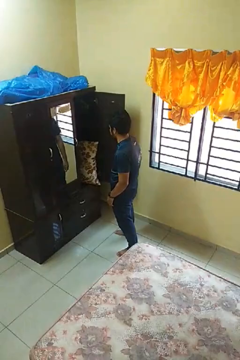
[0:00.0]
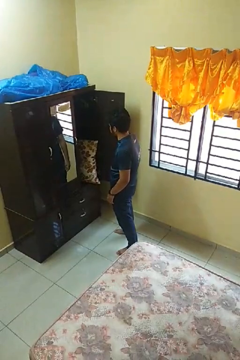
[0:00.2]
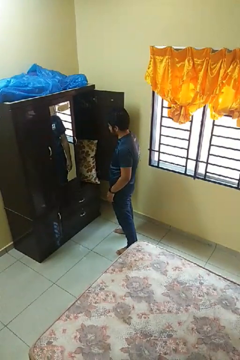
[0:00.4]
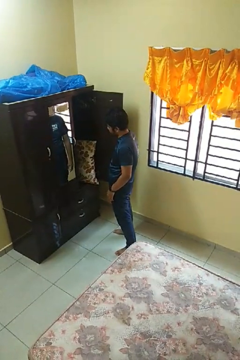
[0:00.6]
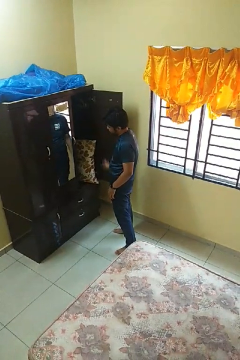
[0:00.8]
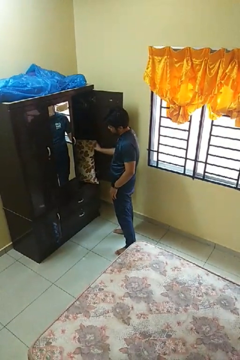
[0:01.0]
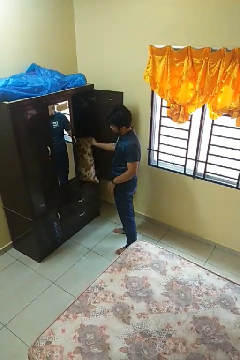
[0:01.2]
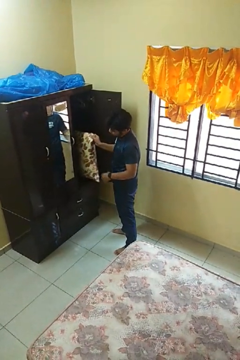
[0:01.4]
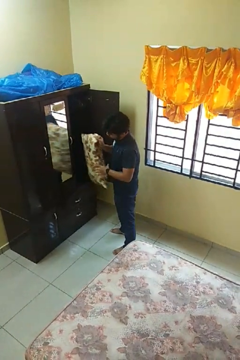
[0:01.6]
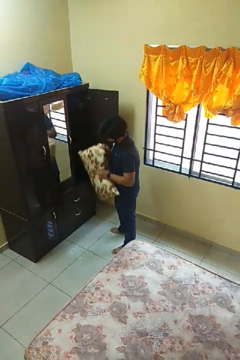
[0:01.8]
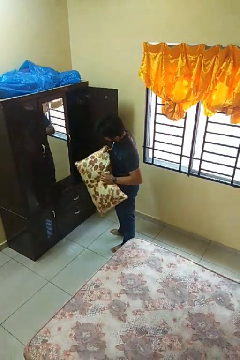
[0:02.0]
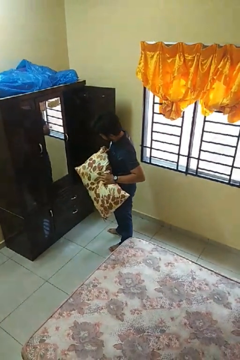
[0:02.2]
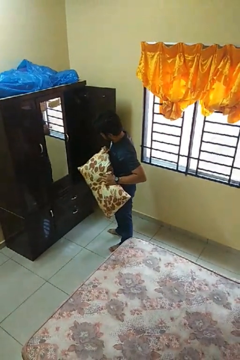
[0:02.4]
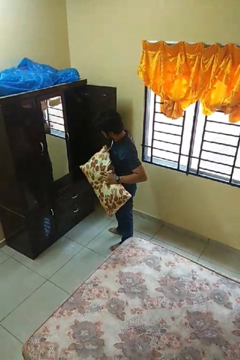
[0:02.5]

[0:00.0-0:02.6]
person picks up object from cabinet

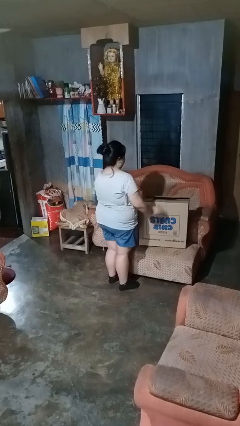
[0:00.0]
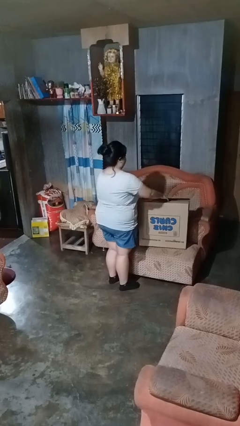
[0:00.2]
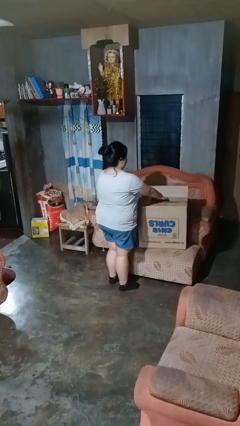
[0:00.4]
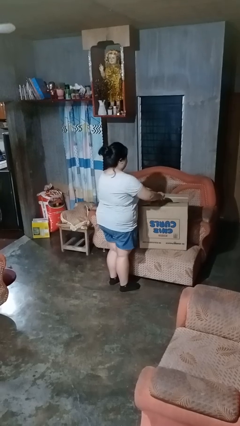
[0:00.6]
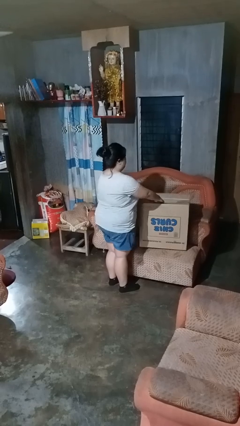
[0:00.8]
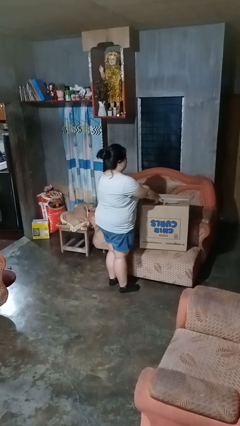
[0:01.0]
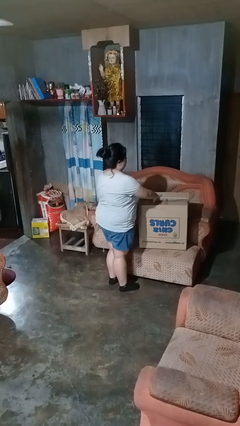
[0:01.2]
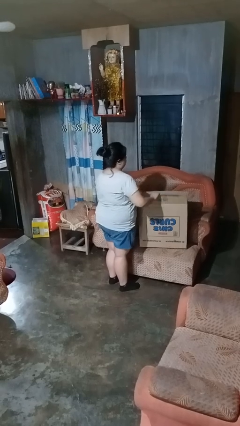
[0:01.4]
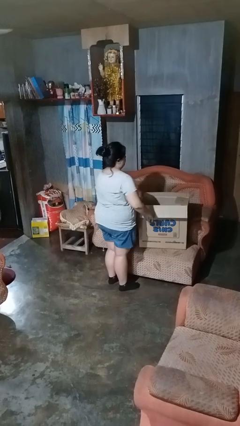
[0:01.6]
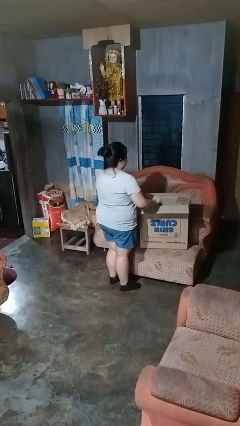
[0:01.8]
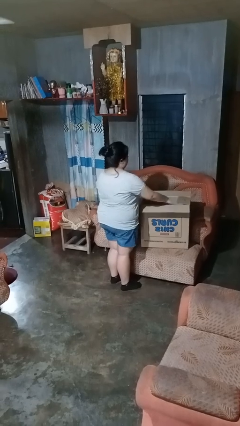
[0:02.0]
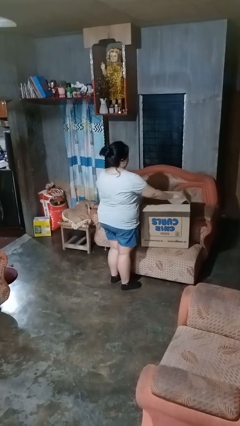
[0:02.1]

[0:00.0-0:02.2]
person opens box

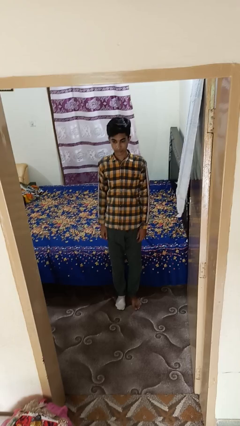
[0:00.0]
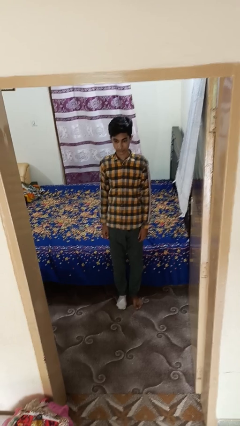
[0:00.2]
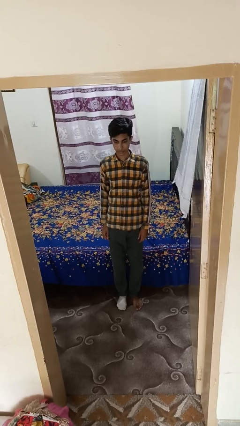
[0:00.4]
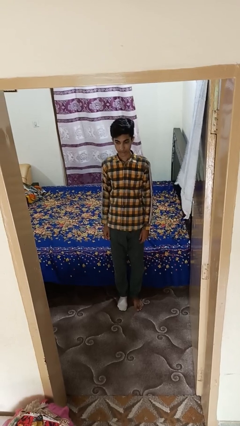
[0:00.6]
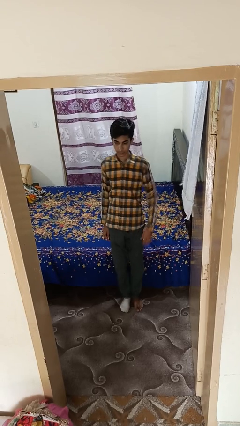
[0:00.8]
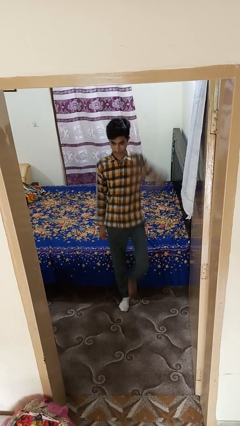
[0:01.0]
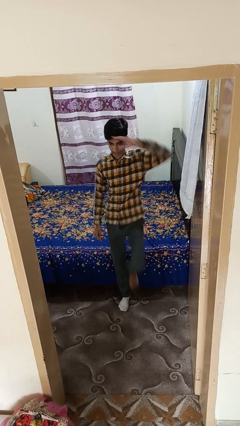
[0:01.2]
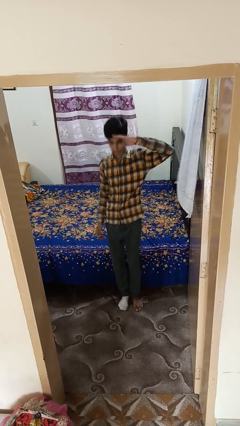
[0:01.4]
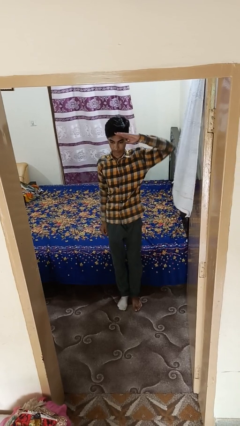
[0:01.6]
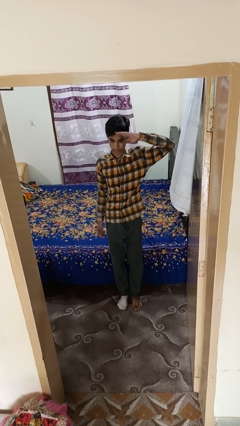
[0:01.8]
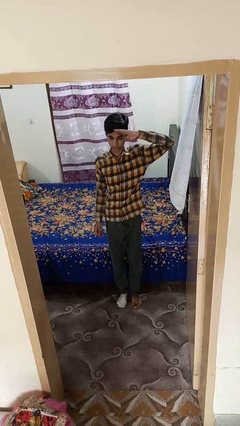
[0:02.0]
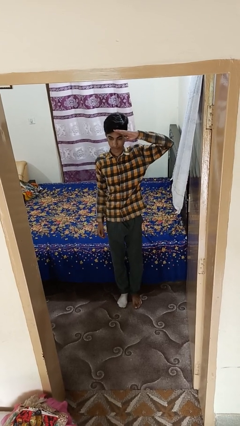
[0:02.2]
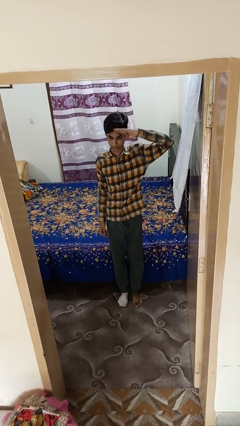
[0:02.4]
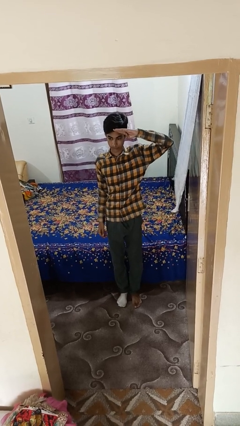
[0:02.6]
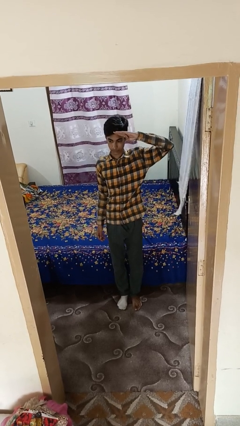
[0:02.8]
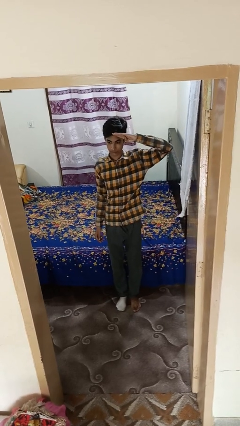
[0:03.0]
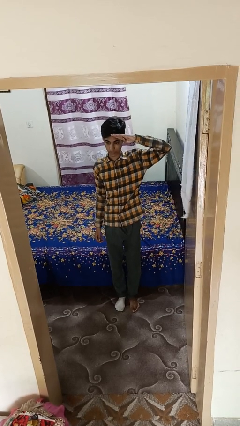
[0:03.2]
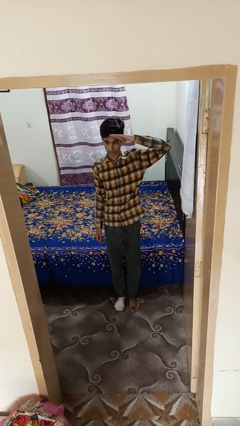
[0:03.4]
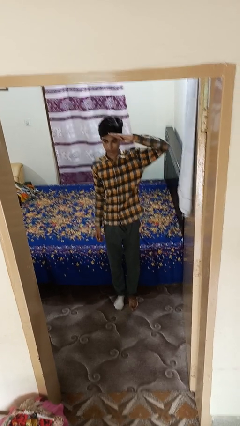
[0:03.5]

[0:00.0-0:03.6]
person salutes

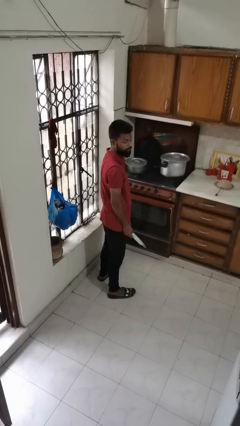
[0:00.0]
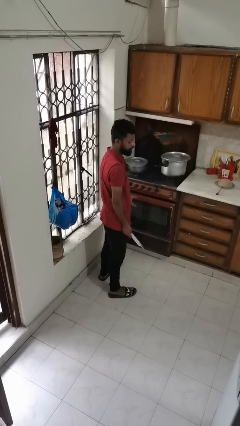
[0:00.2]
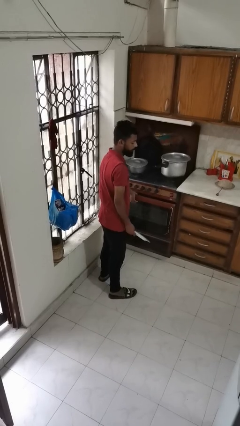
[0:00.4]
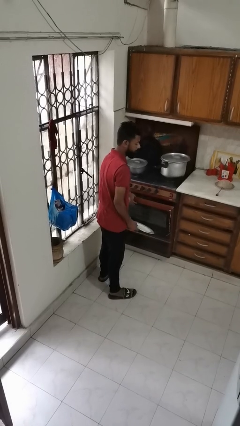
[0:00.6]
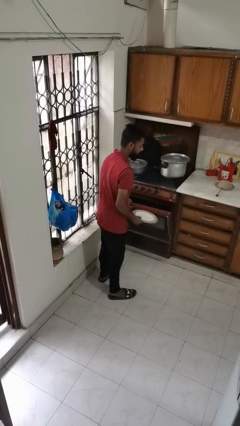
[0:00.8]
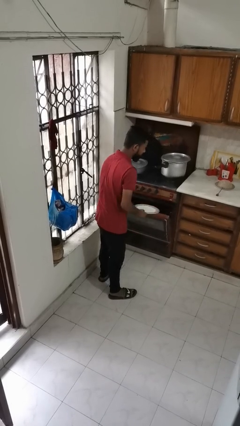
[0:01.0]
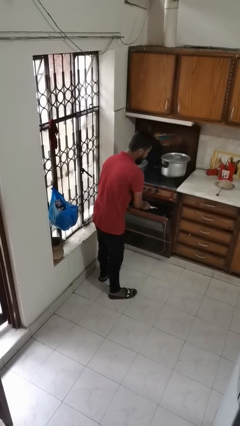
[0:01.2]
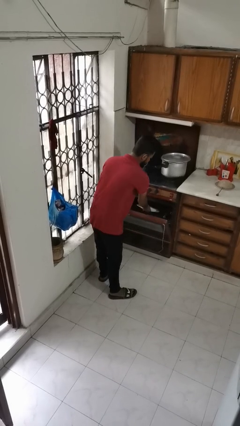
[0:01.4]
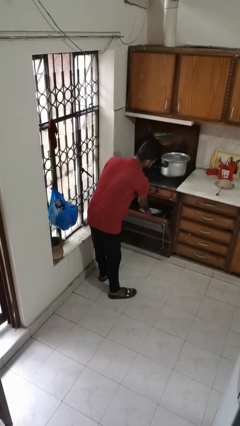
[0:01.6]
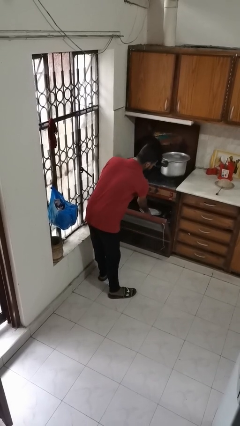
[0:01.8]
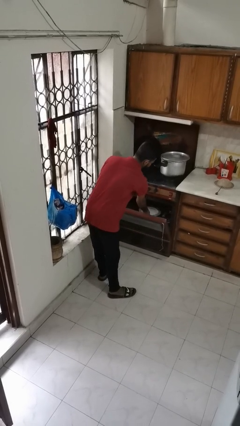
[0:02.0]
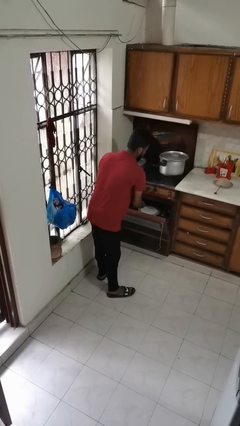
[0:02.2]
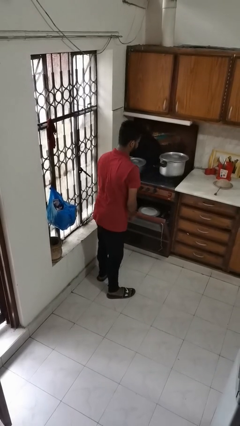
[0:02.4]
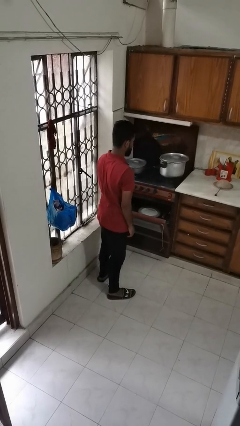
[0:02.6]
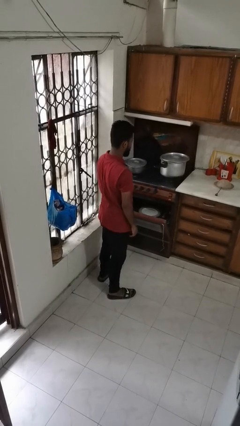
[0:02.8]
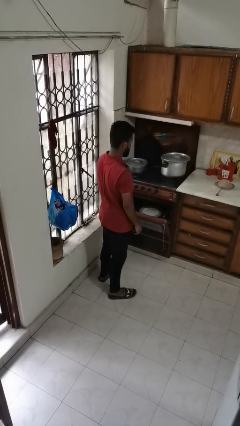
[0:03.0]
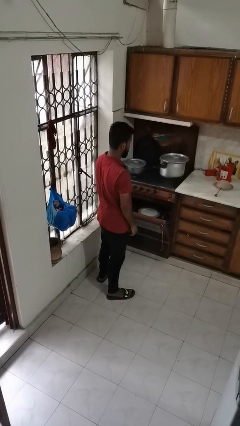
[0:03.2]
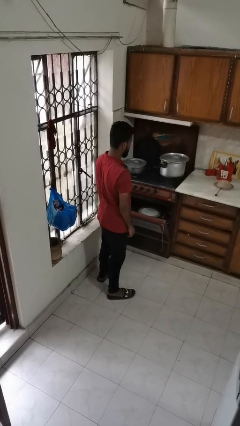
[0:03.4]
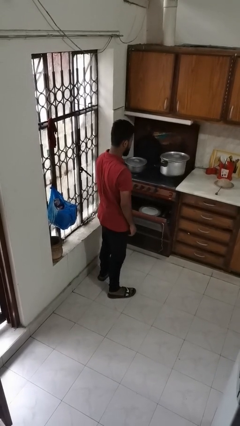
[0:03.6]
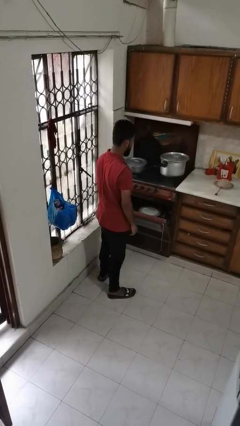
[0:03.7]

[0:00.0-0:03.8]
person puts object into oven

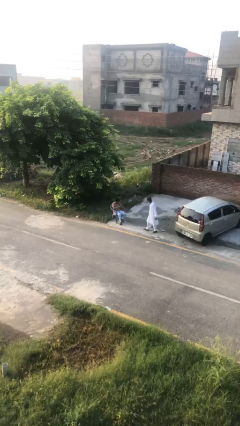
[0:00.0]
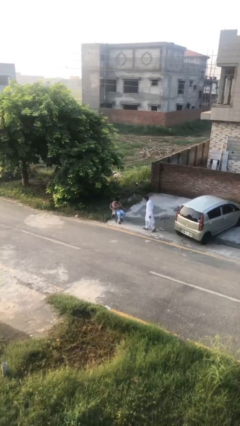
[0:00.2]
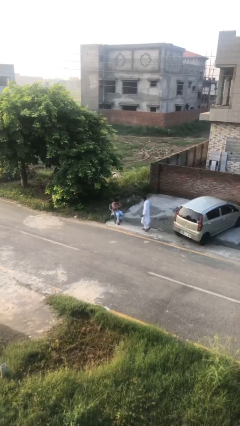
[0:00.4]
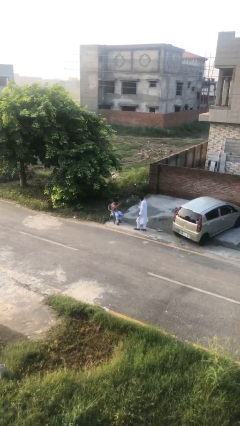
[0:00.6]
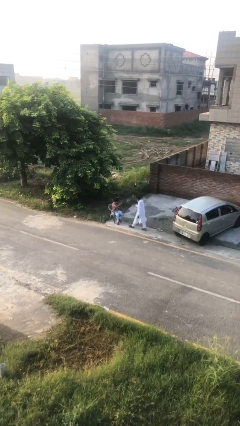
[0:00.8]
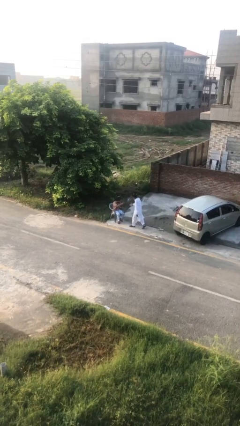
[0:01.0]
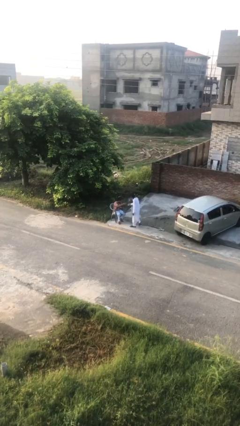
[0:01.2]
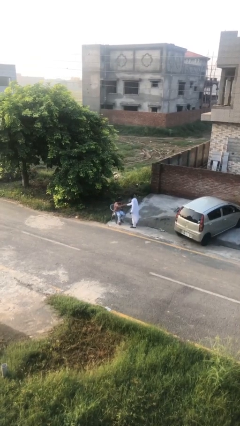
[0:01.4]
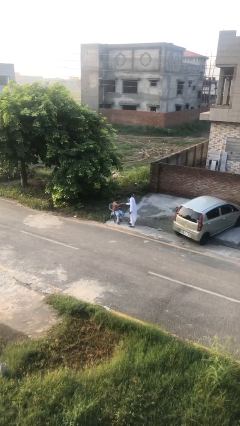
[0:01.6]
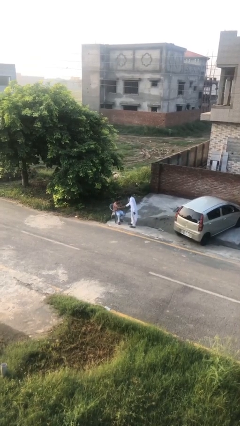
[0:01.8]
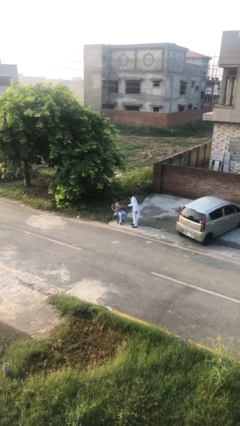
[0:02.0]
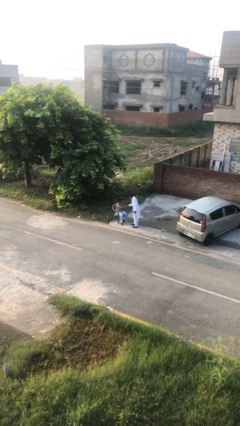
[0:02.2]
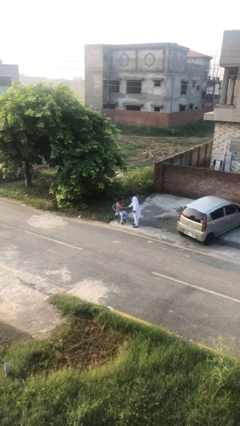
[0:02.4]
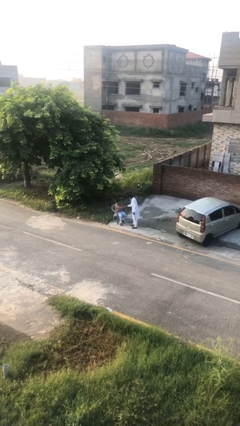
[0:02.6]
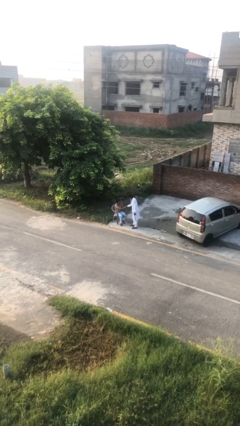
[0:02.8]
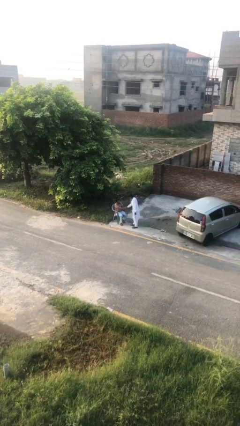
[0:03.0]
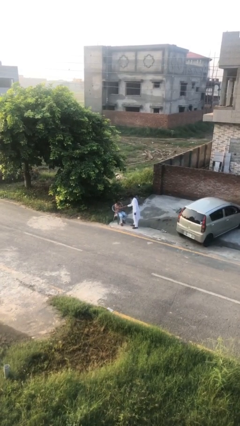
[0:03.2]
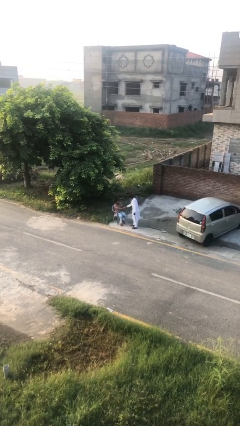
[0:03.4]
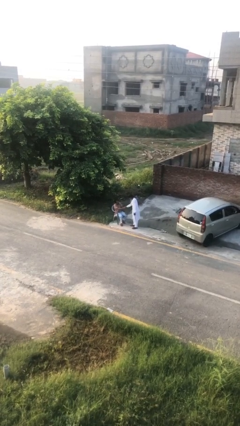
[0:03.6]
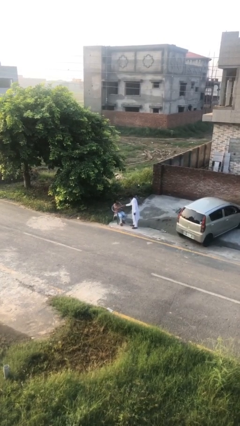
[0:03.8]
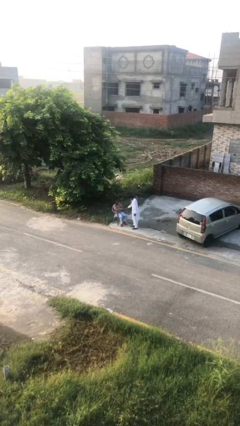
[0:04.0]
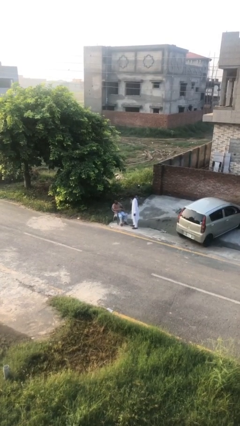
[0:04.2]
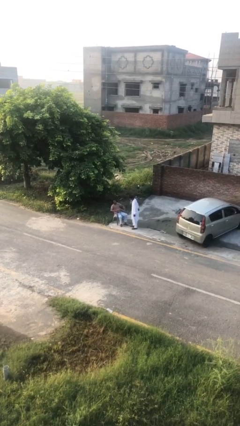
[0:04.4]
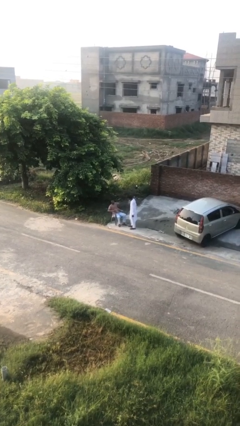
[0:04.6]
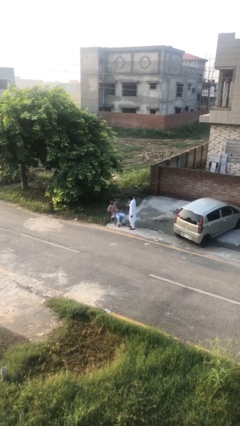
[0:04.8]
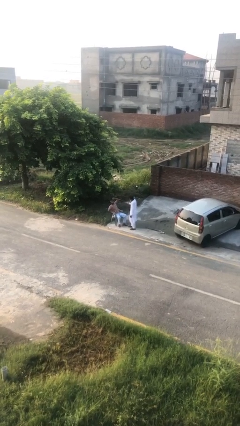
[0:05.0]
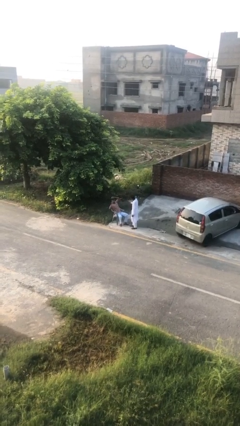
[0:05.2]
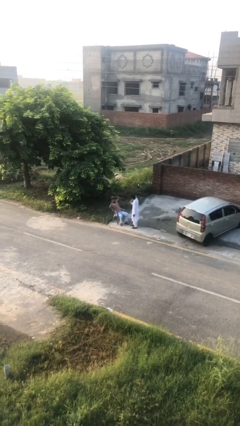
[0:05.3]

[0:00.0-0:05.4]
person shakes hand

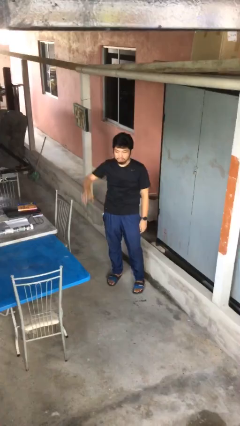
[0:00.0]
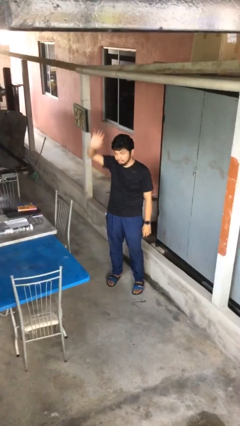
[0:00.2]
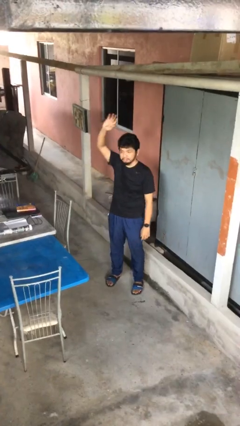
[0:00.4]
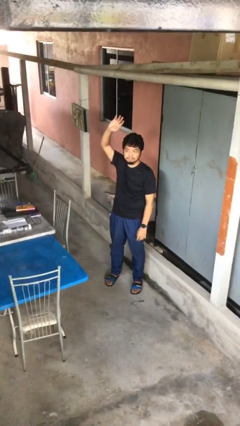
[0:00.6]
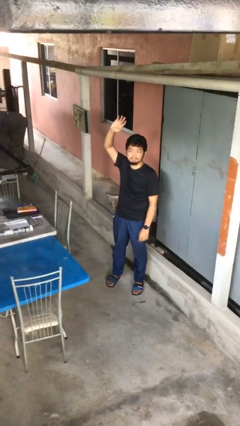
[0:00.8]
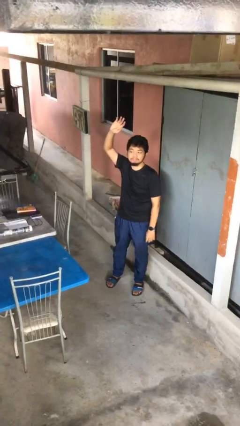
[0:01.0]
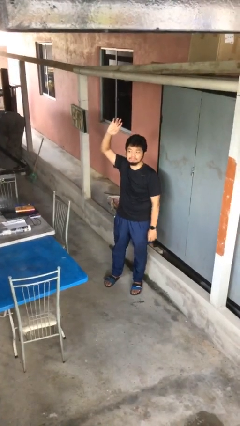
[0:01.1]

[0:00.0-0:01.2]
person gestures raise hand
